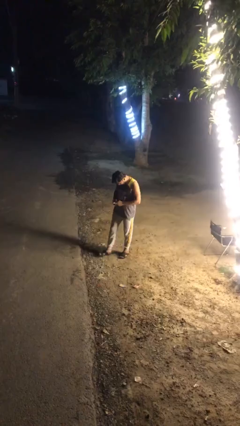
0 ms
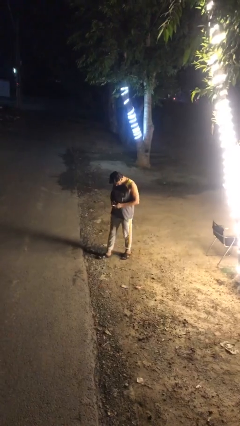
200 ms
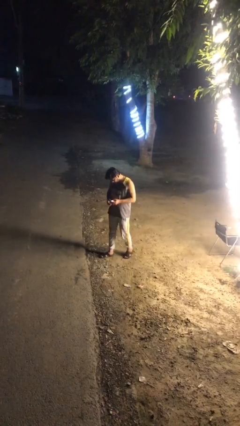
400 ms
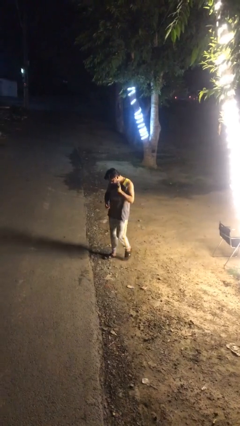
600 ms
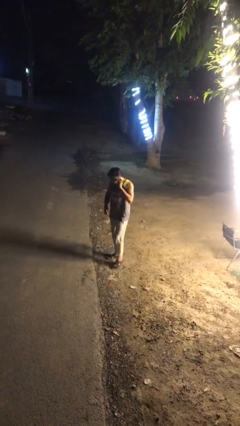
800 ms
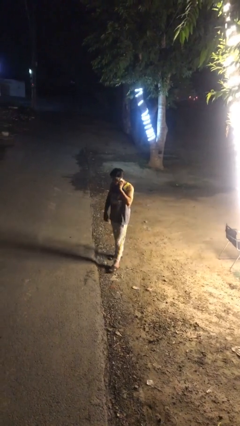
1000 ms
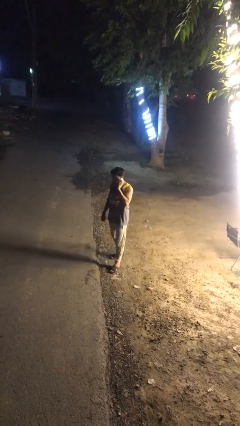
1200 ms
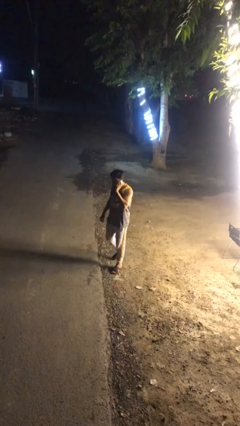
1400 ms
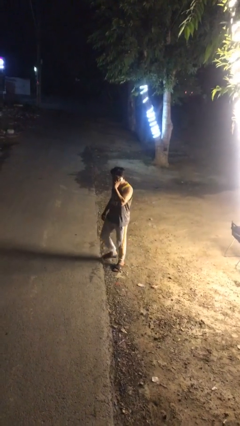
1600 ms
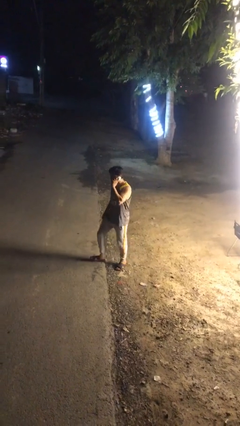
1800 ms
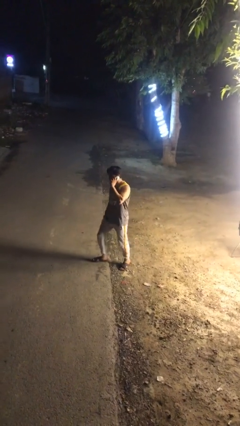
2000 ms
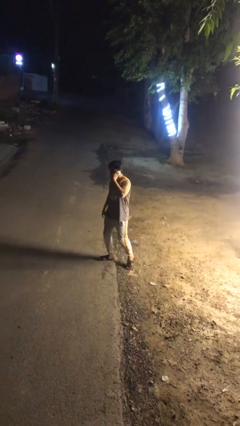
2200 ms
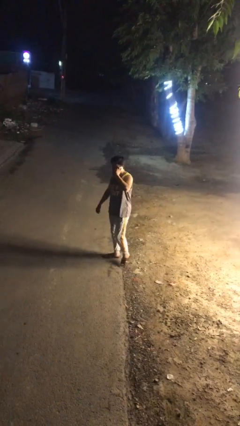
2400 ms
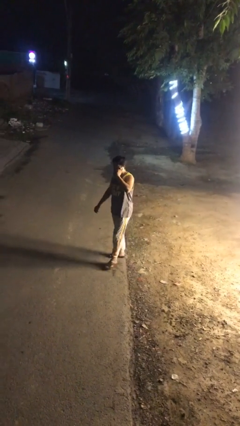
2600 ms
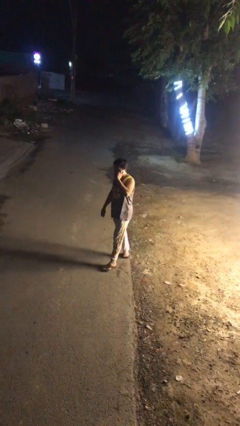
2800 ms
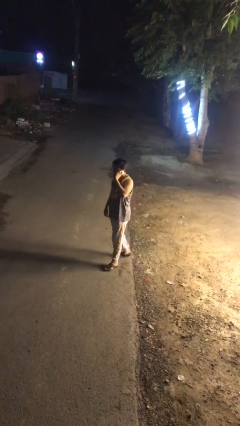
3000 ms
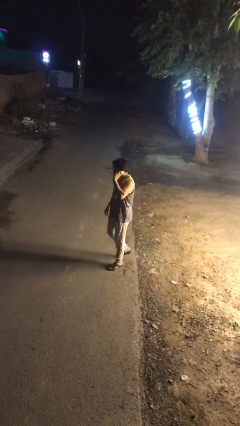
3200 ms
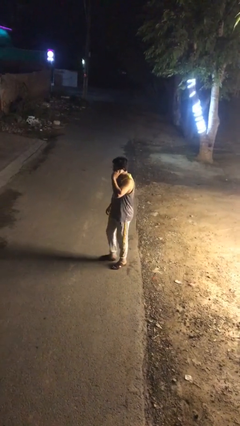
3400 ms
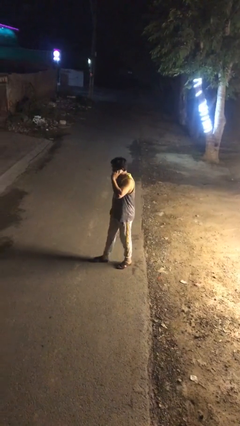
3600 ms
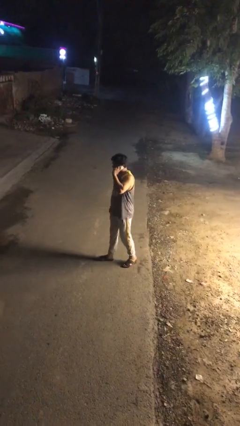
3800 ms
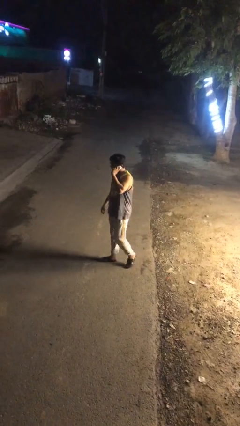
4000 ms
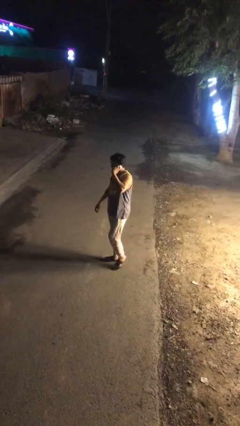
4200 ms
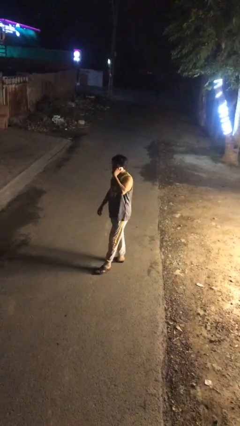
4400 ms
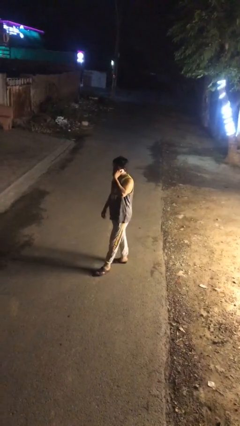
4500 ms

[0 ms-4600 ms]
person talks on phone

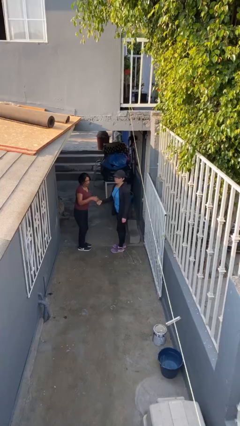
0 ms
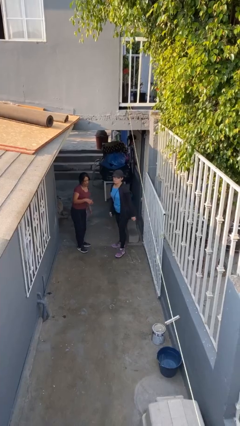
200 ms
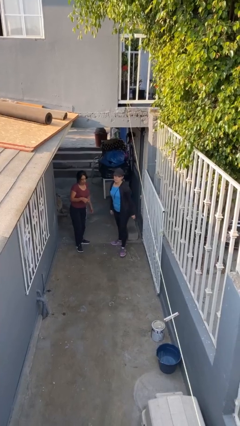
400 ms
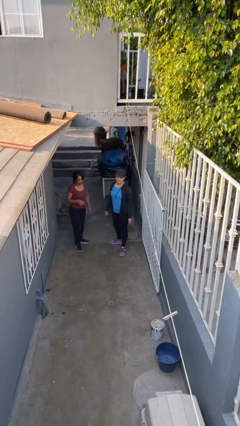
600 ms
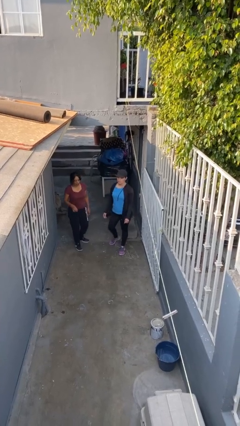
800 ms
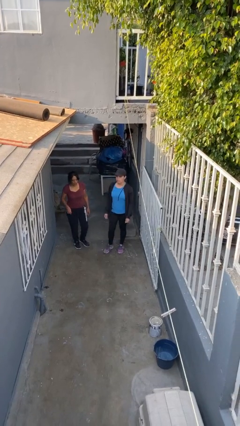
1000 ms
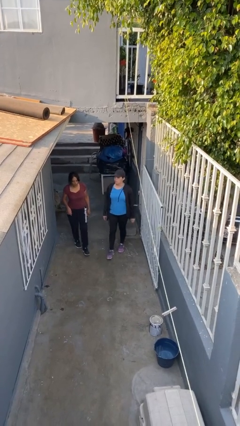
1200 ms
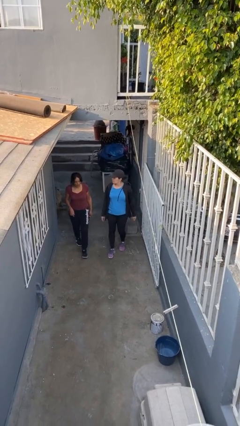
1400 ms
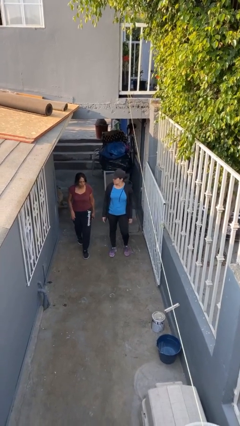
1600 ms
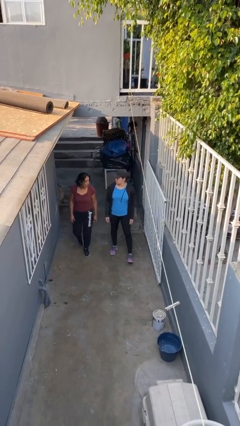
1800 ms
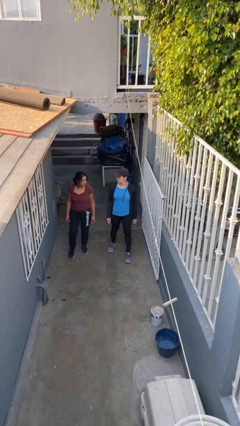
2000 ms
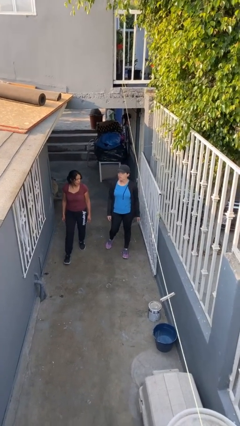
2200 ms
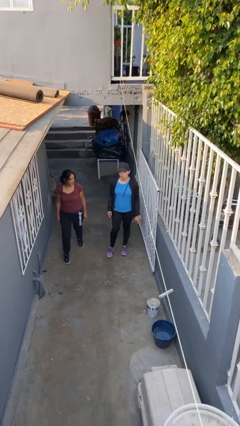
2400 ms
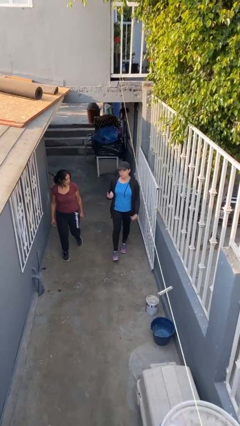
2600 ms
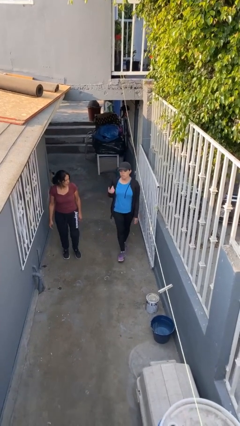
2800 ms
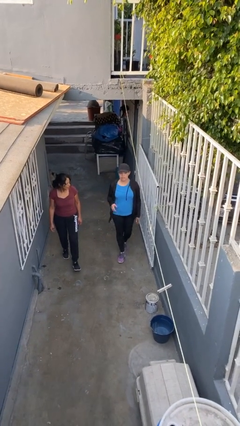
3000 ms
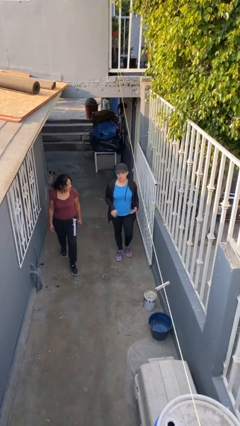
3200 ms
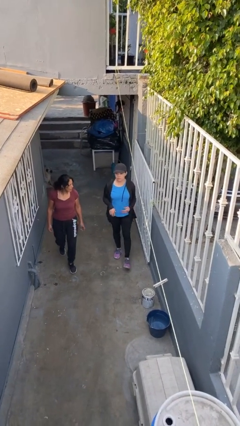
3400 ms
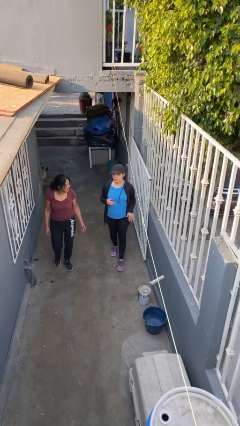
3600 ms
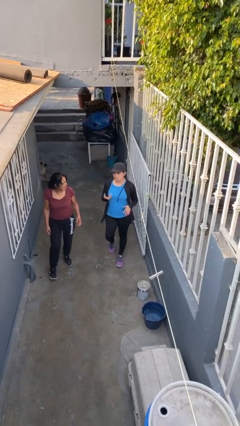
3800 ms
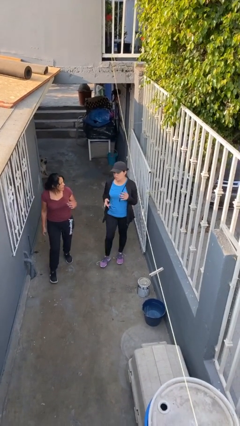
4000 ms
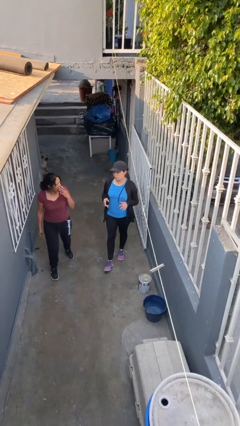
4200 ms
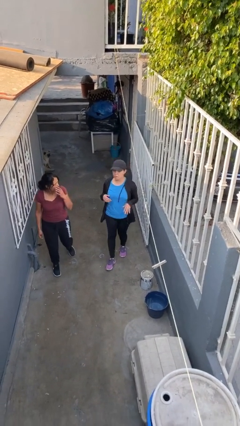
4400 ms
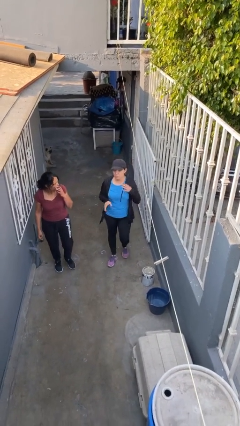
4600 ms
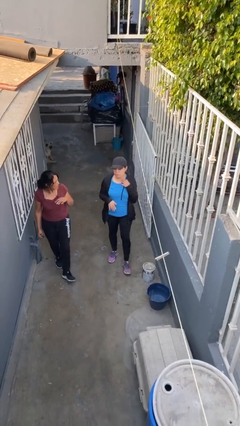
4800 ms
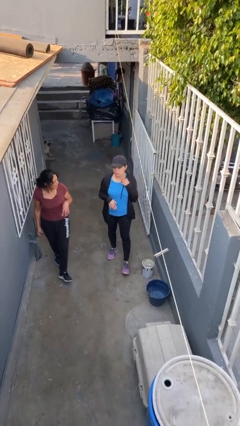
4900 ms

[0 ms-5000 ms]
person talks to person

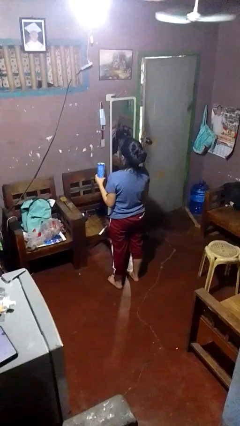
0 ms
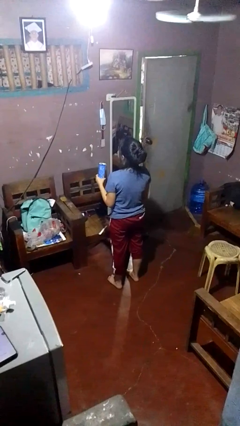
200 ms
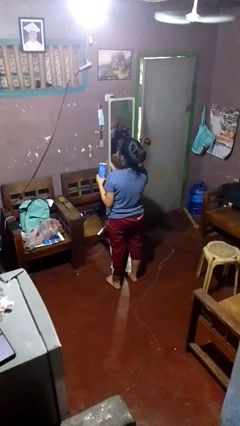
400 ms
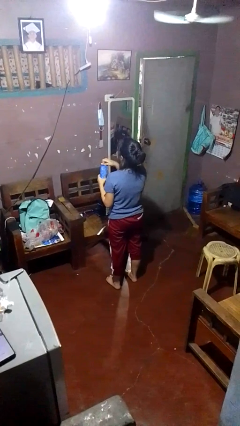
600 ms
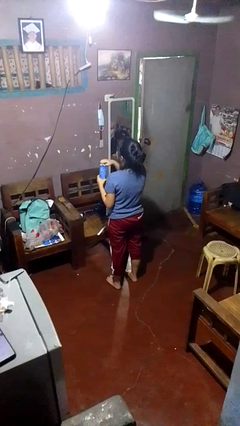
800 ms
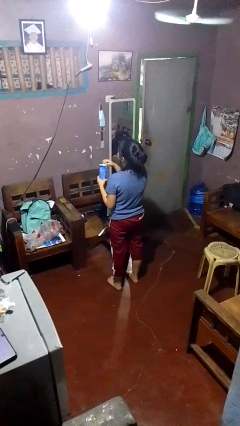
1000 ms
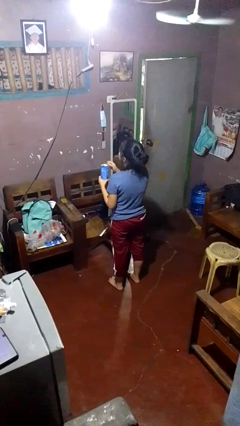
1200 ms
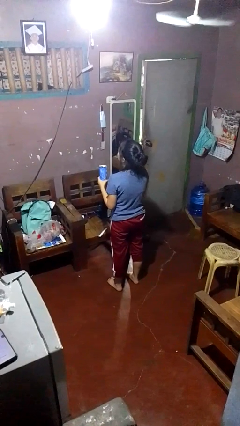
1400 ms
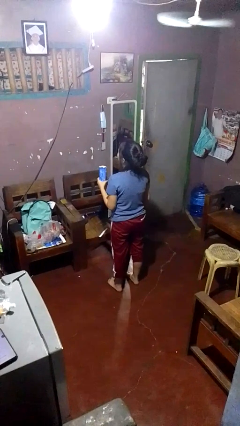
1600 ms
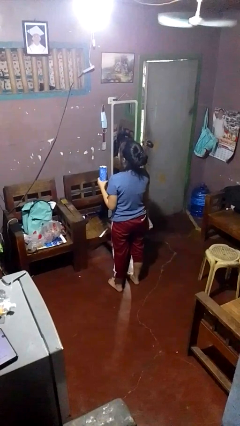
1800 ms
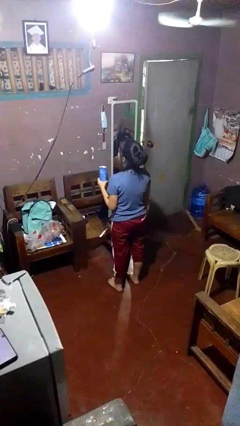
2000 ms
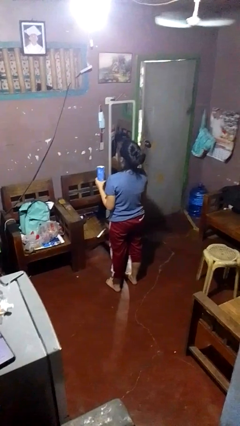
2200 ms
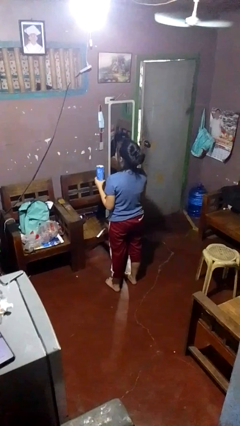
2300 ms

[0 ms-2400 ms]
person opens beverage can

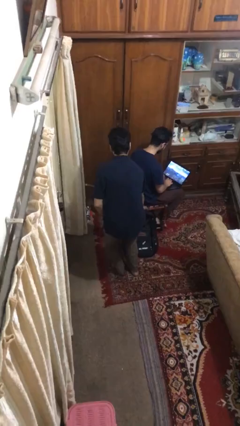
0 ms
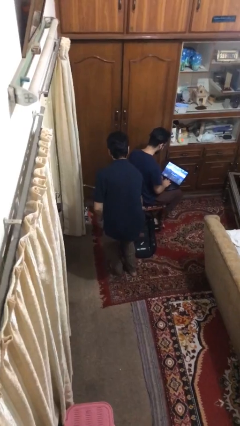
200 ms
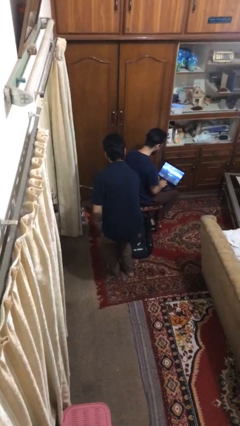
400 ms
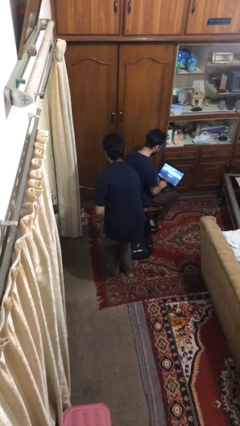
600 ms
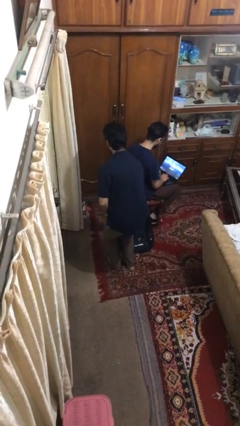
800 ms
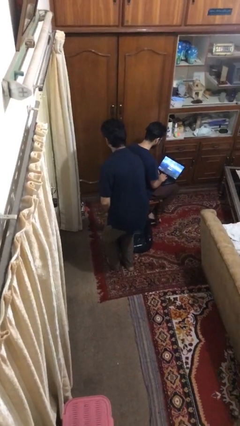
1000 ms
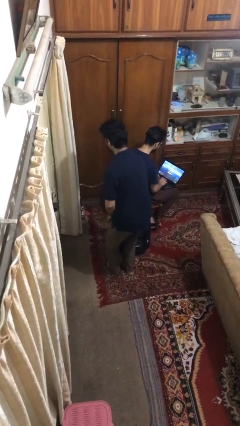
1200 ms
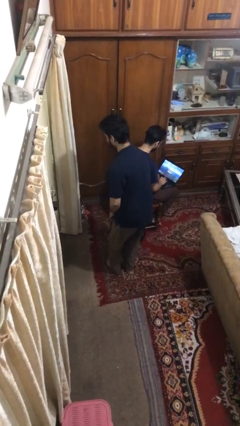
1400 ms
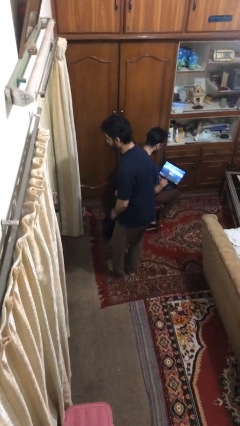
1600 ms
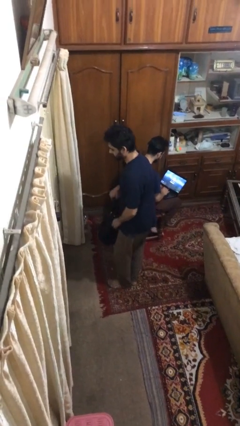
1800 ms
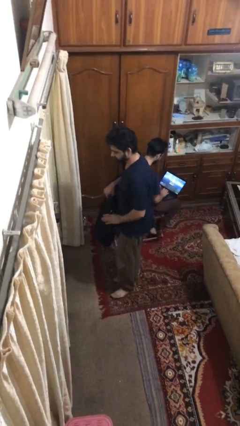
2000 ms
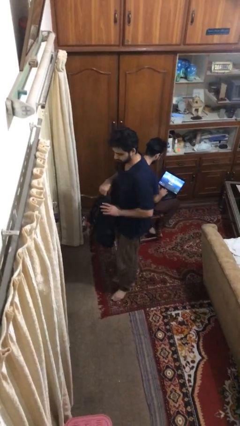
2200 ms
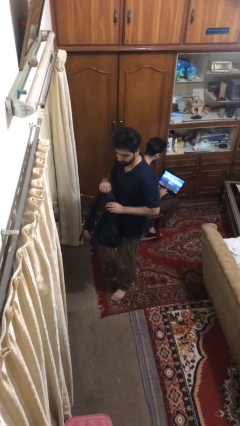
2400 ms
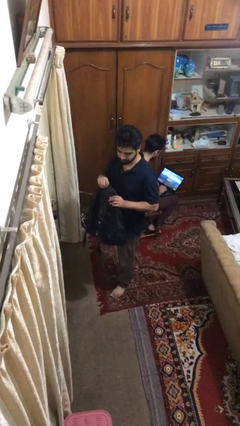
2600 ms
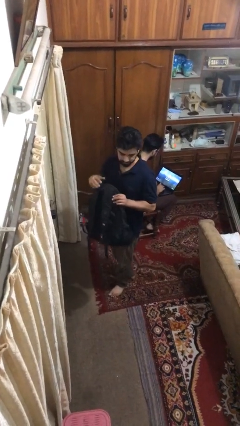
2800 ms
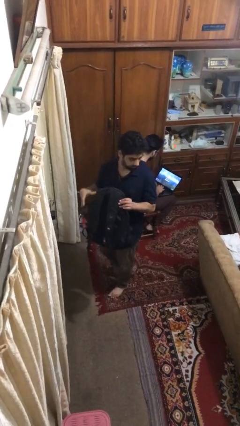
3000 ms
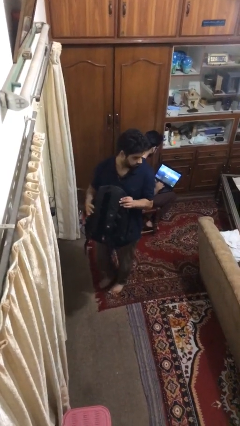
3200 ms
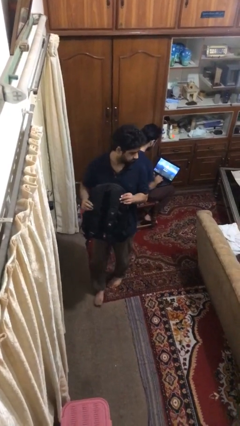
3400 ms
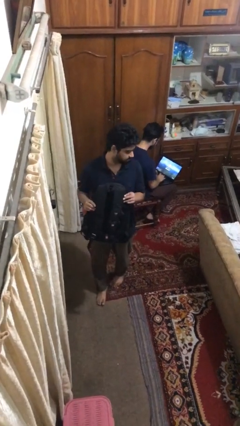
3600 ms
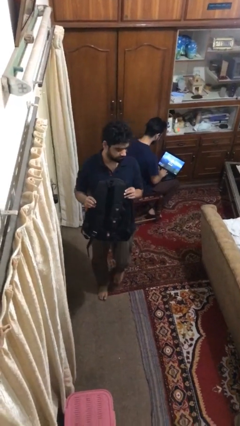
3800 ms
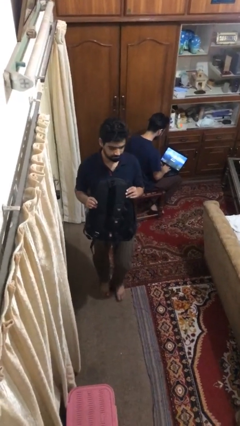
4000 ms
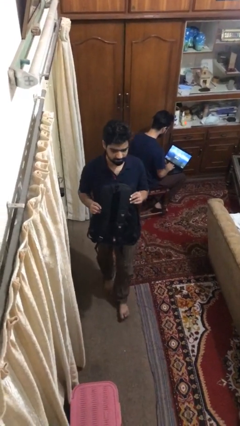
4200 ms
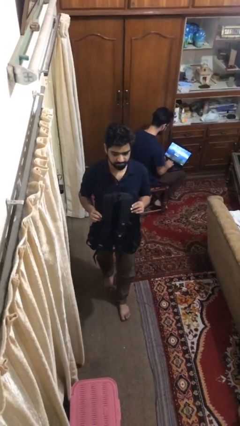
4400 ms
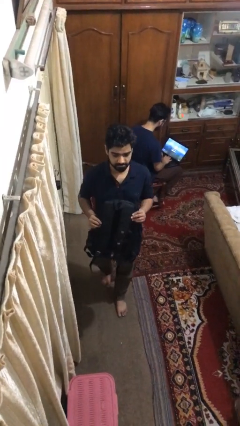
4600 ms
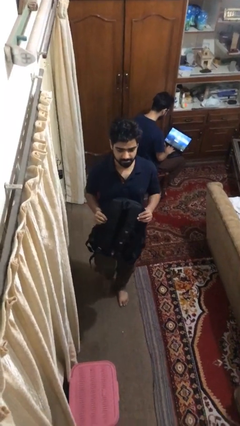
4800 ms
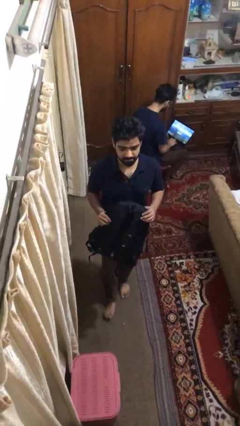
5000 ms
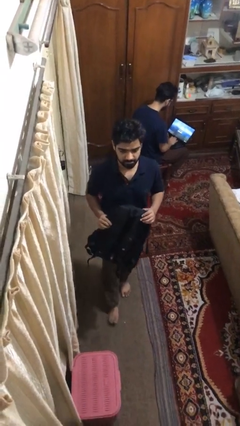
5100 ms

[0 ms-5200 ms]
person steals object from person

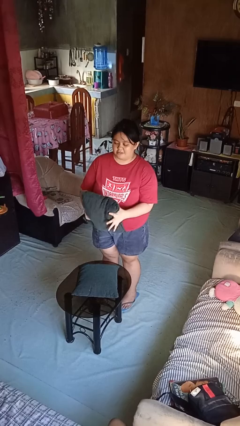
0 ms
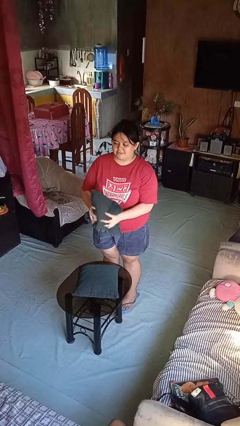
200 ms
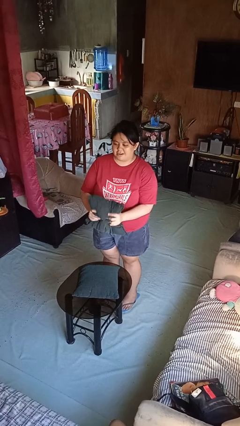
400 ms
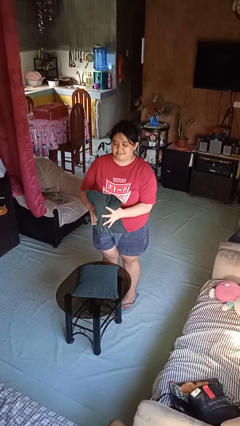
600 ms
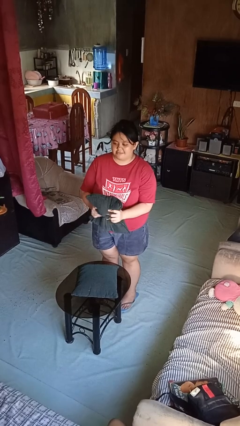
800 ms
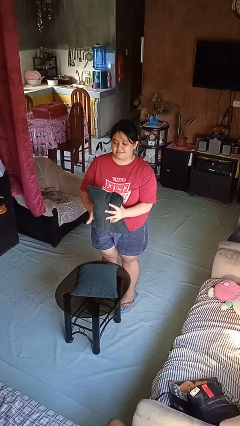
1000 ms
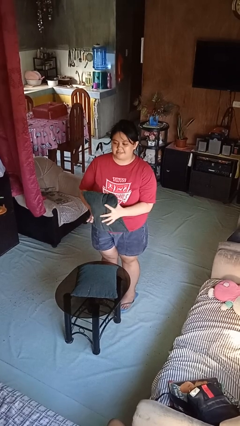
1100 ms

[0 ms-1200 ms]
person squeezes object
